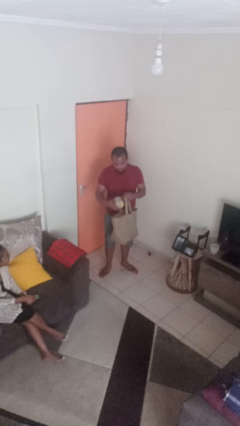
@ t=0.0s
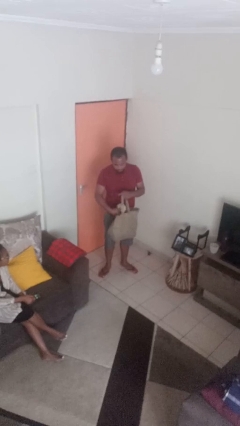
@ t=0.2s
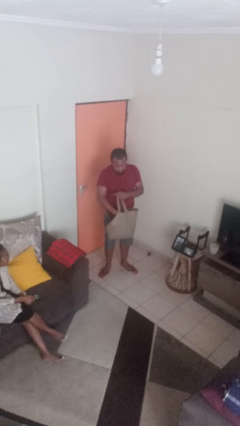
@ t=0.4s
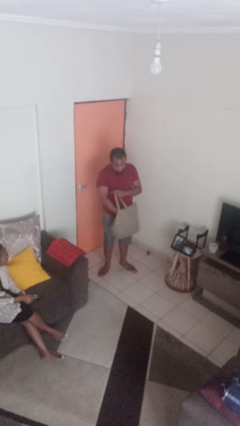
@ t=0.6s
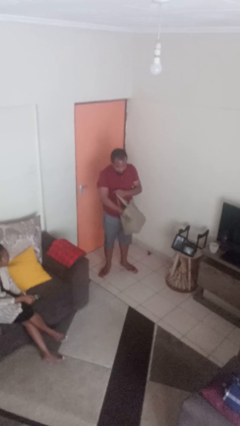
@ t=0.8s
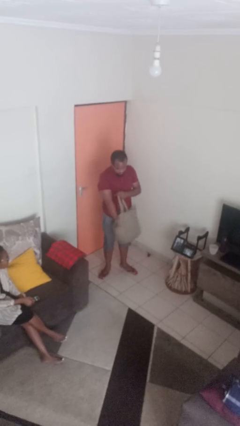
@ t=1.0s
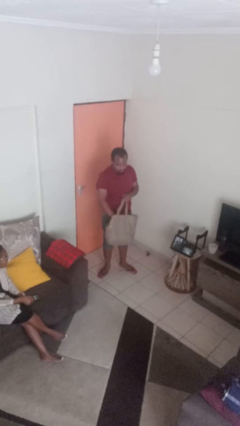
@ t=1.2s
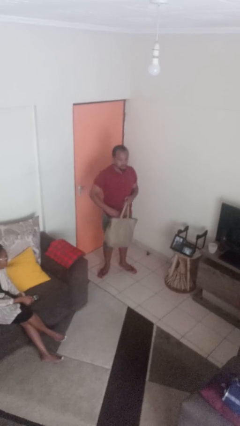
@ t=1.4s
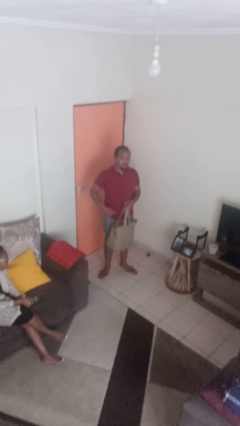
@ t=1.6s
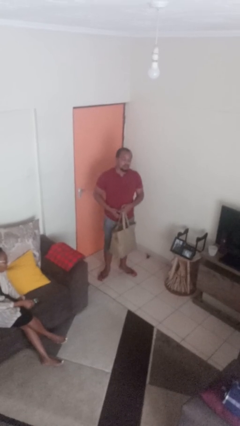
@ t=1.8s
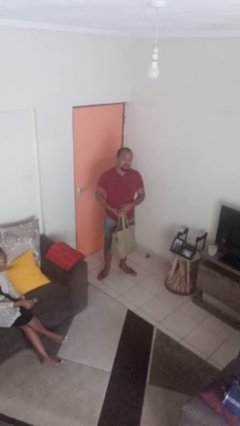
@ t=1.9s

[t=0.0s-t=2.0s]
person puts object into bag

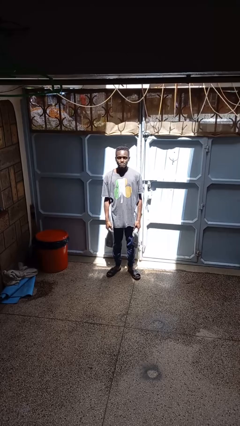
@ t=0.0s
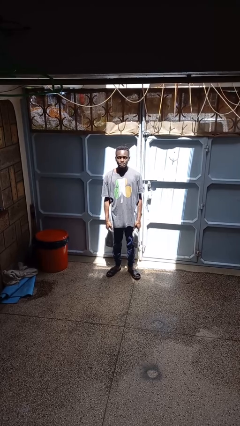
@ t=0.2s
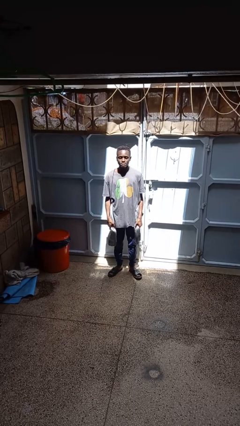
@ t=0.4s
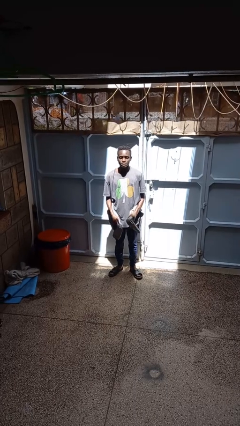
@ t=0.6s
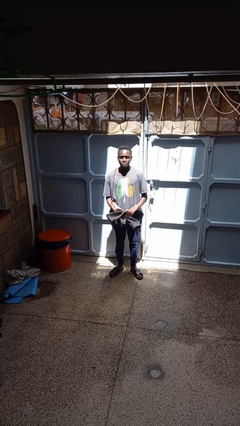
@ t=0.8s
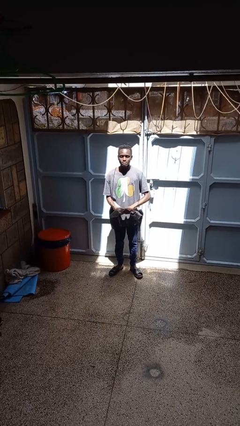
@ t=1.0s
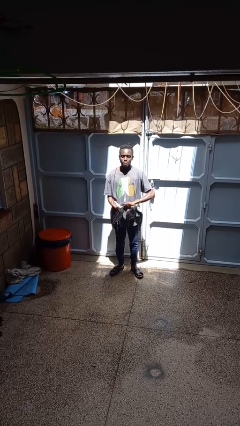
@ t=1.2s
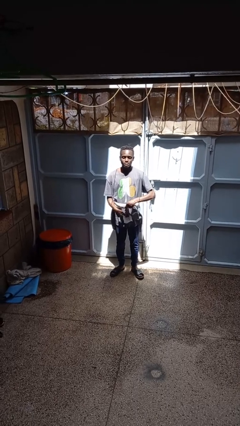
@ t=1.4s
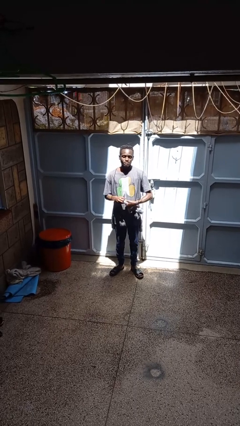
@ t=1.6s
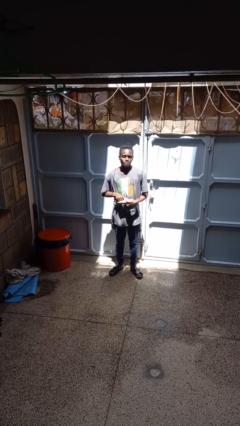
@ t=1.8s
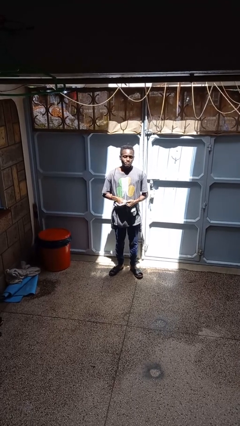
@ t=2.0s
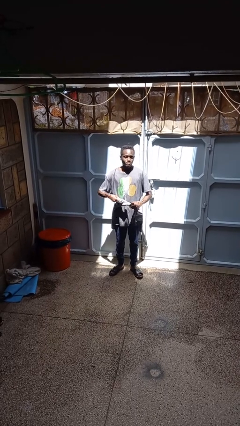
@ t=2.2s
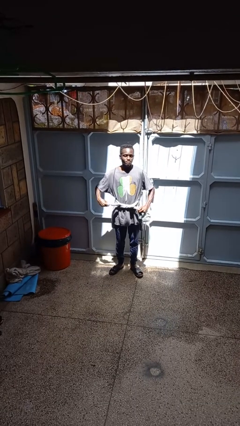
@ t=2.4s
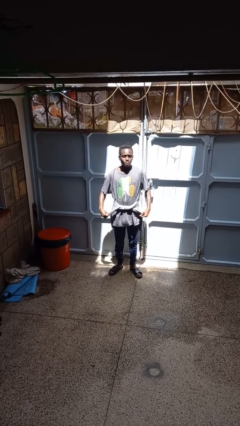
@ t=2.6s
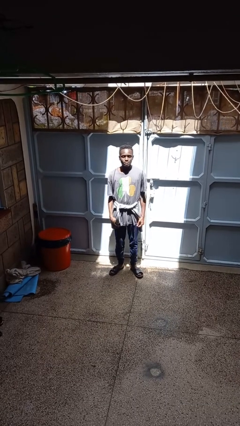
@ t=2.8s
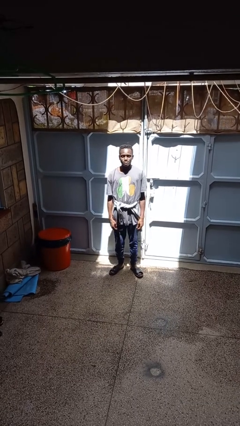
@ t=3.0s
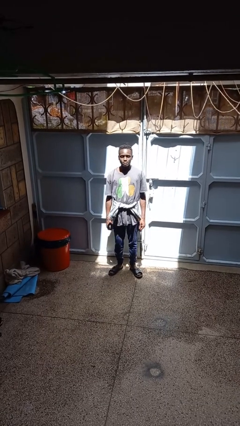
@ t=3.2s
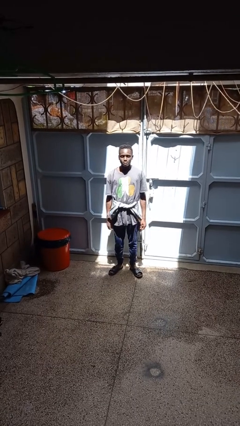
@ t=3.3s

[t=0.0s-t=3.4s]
person ties jacket around waist

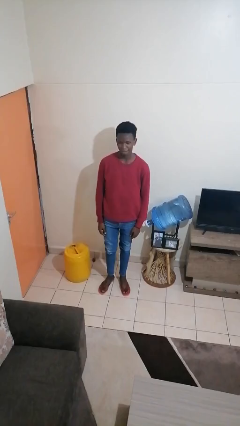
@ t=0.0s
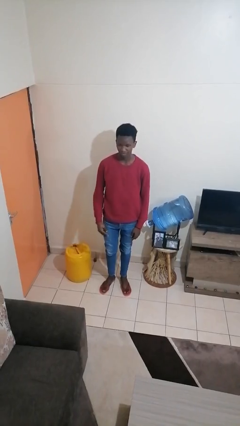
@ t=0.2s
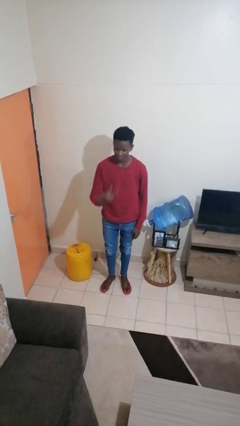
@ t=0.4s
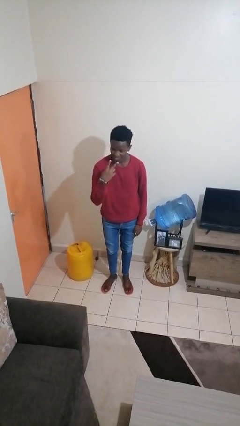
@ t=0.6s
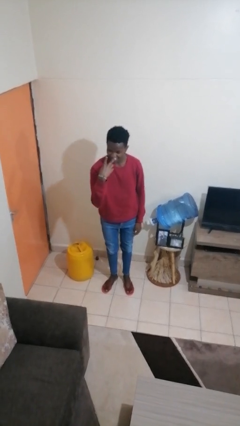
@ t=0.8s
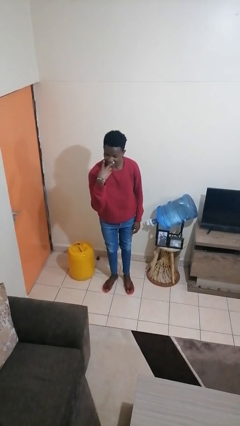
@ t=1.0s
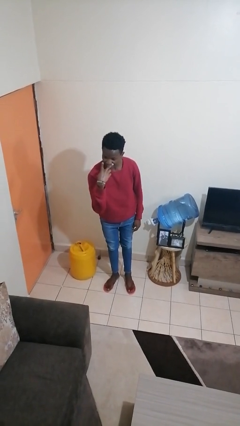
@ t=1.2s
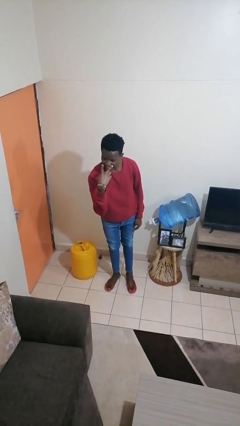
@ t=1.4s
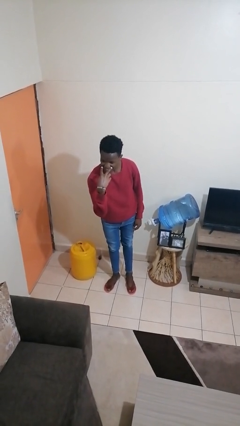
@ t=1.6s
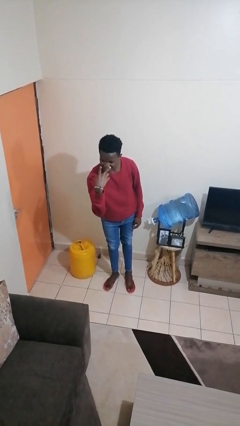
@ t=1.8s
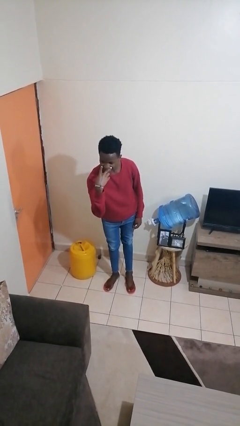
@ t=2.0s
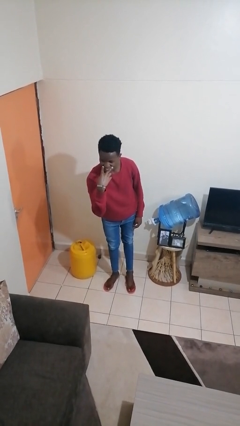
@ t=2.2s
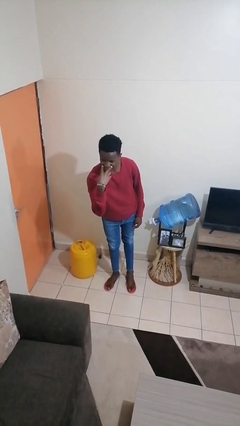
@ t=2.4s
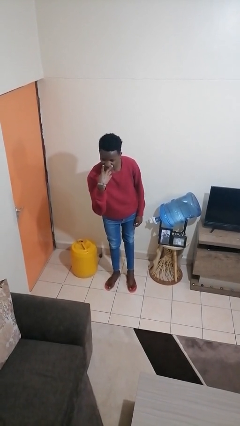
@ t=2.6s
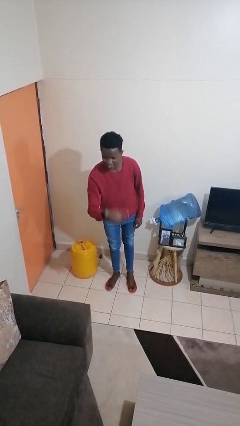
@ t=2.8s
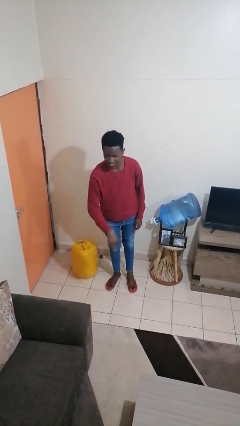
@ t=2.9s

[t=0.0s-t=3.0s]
person gestures watch closely

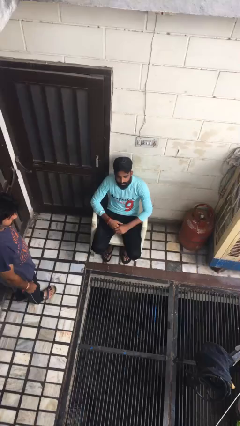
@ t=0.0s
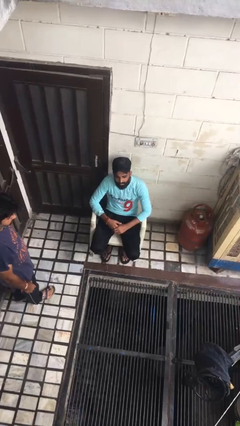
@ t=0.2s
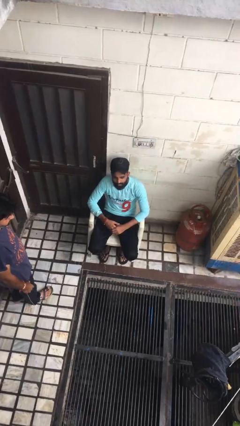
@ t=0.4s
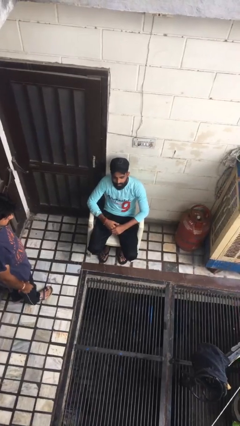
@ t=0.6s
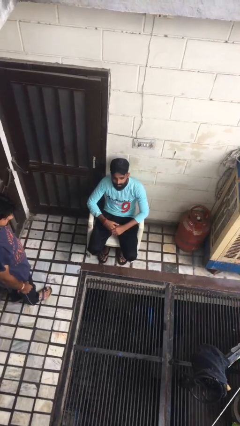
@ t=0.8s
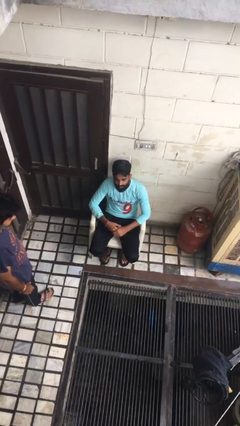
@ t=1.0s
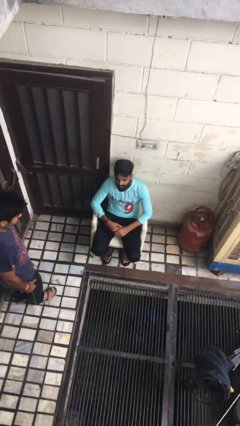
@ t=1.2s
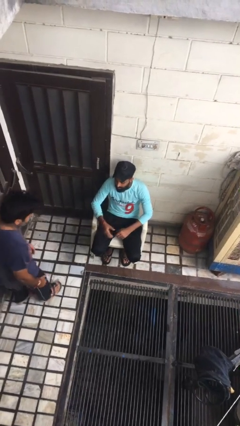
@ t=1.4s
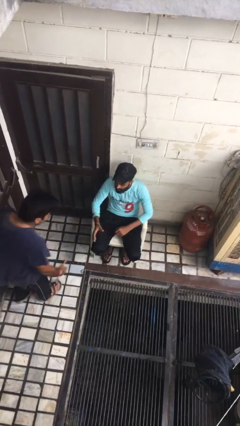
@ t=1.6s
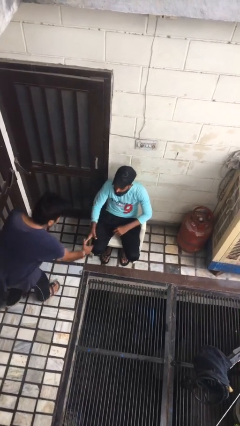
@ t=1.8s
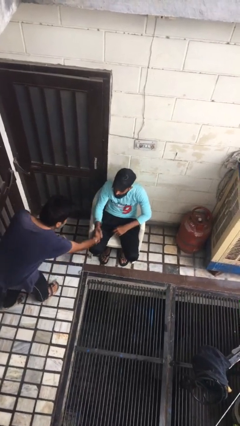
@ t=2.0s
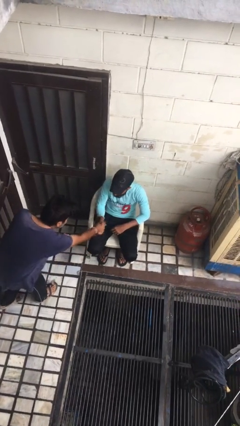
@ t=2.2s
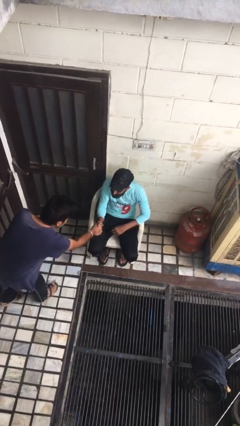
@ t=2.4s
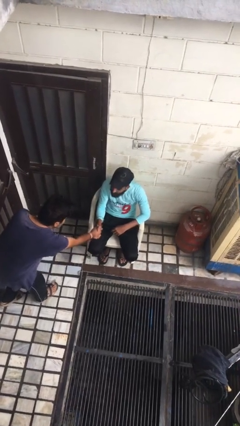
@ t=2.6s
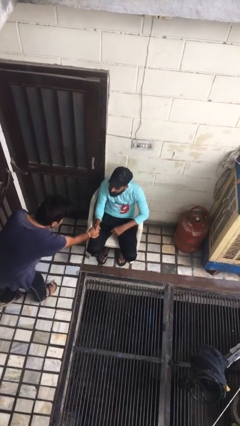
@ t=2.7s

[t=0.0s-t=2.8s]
person shakes hand

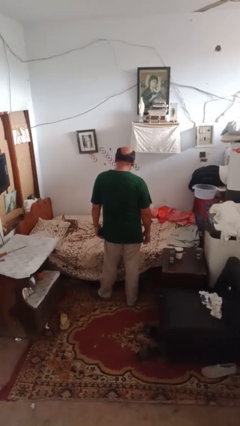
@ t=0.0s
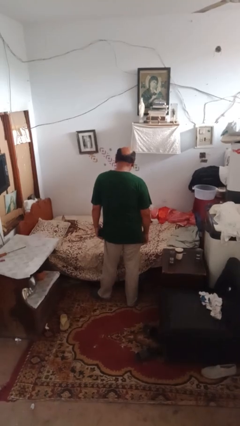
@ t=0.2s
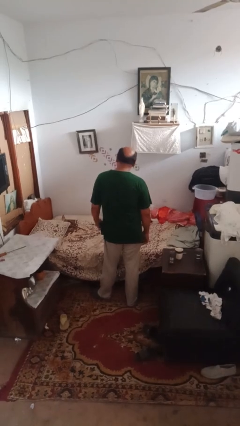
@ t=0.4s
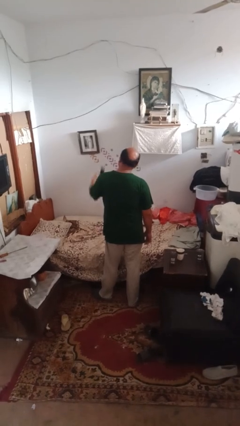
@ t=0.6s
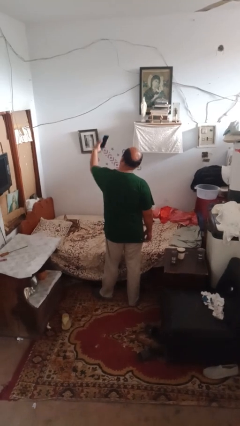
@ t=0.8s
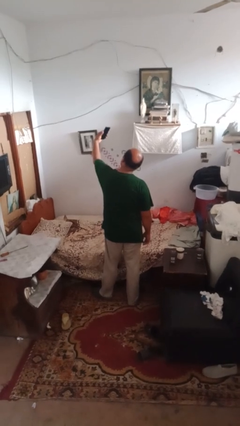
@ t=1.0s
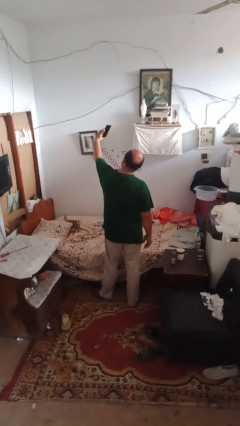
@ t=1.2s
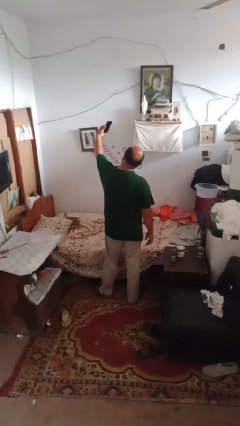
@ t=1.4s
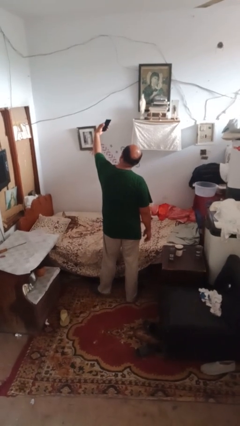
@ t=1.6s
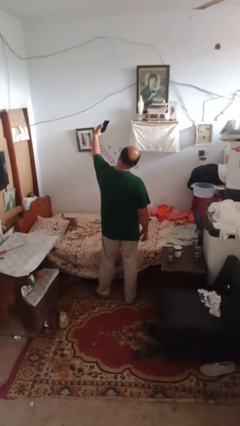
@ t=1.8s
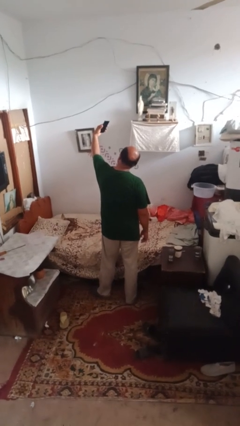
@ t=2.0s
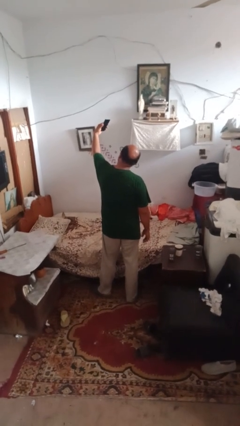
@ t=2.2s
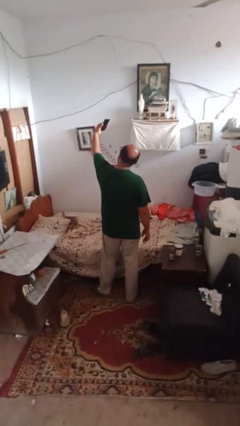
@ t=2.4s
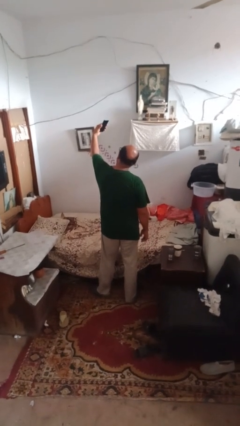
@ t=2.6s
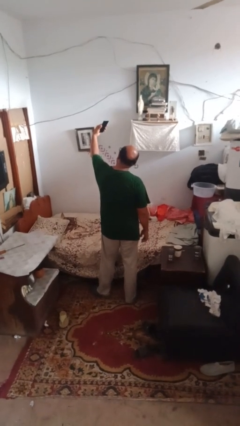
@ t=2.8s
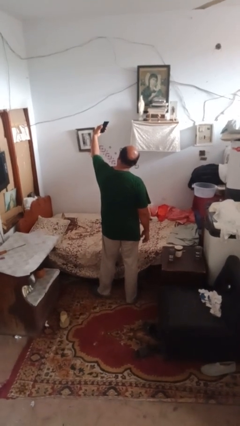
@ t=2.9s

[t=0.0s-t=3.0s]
person takes selfie

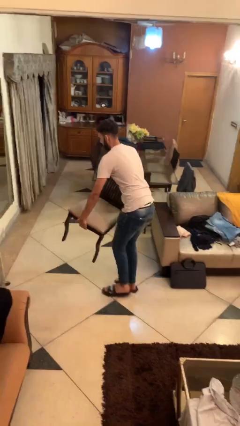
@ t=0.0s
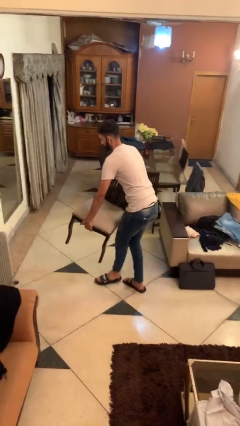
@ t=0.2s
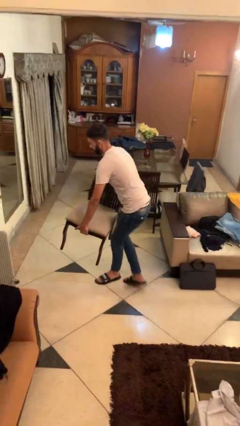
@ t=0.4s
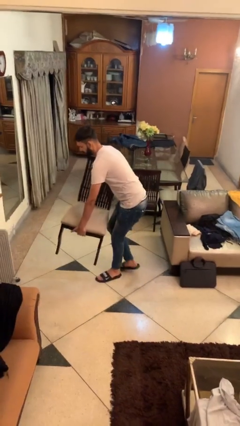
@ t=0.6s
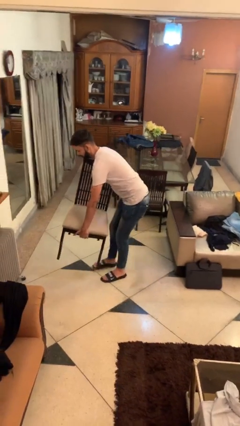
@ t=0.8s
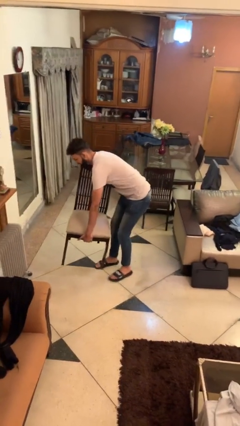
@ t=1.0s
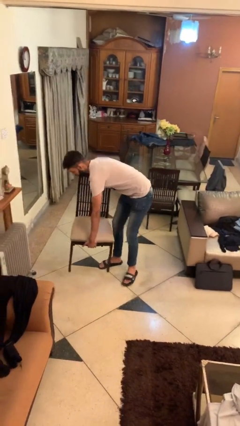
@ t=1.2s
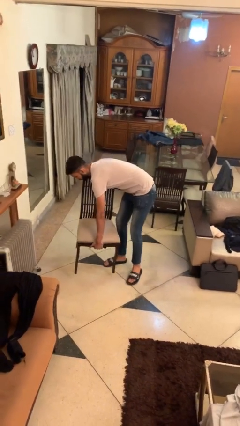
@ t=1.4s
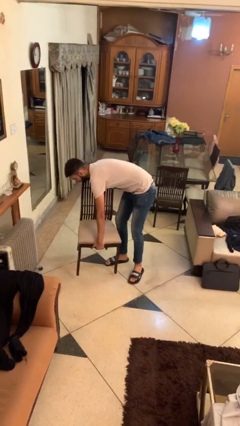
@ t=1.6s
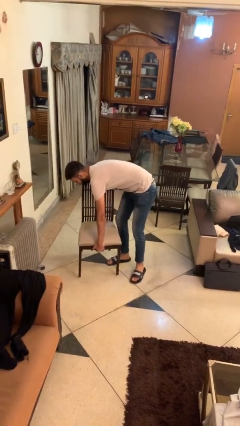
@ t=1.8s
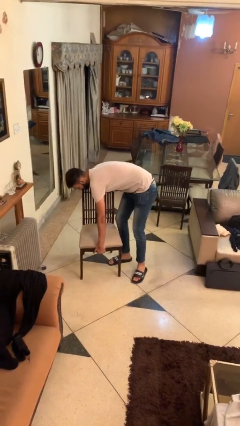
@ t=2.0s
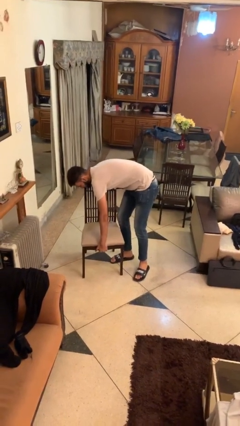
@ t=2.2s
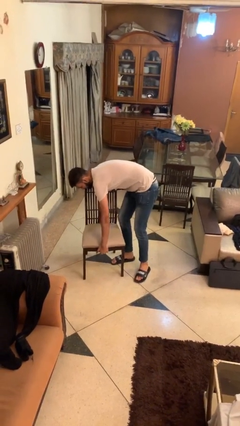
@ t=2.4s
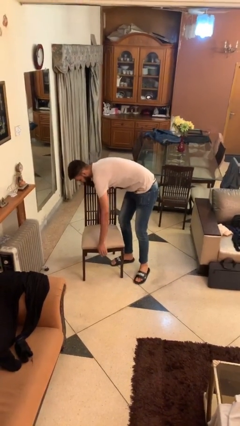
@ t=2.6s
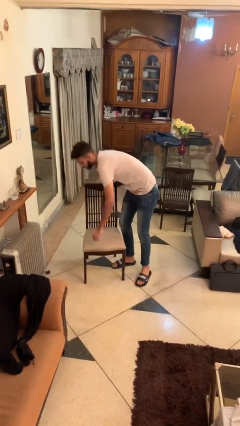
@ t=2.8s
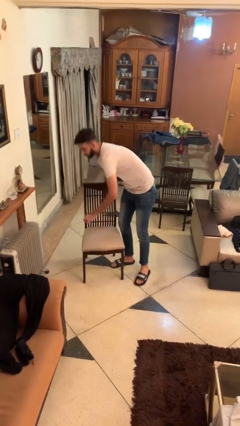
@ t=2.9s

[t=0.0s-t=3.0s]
person puts down object on floor

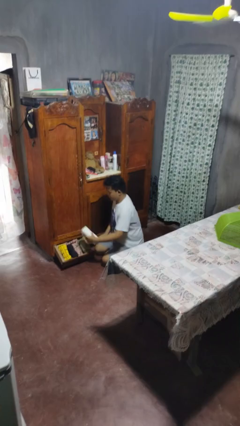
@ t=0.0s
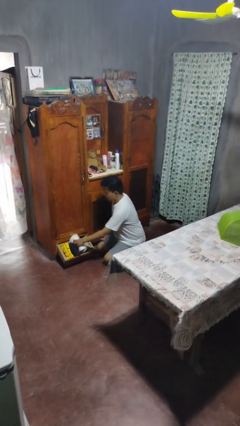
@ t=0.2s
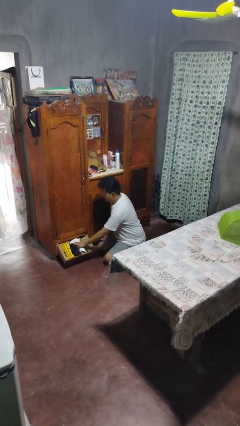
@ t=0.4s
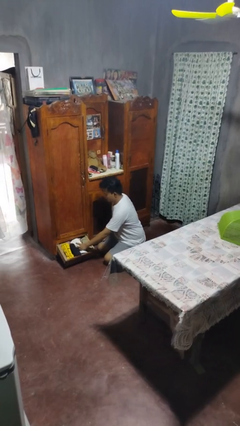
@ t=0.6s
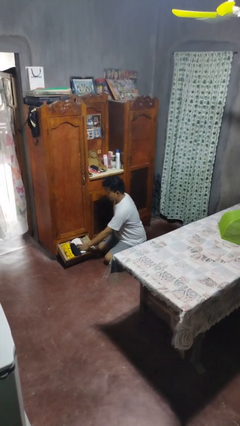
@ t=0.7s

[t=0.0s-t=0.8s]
person puts clothes into dresser
